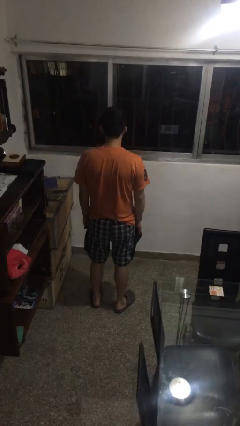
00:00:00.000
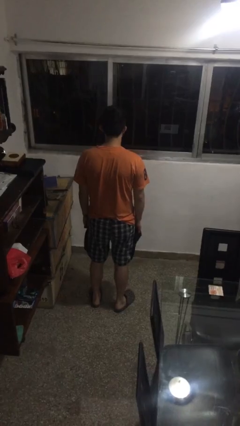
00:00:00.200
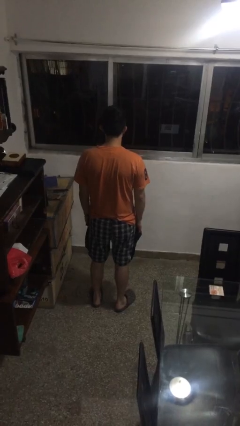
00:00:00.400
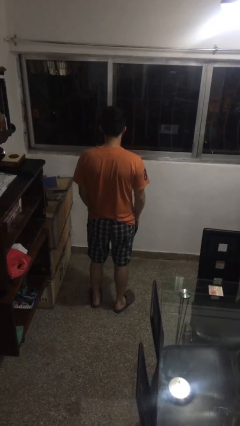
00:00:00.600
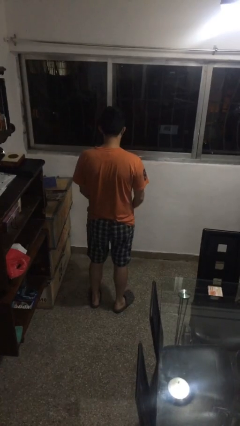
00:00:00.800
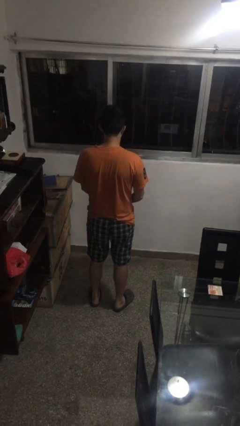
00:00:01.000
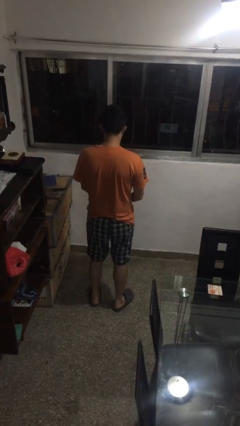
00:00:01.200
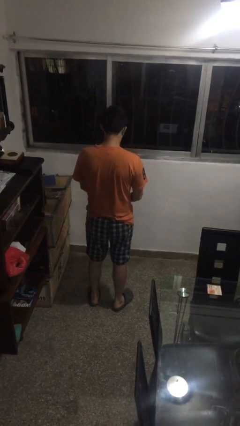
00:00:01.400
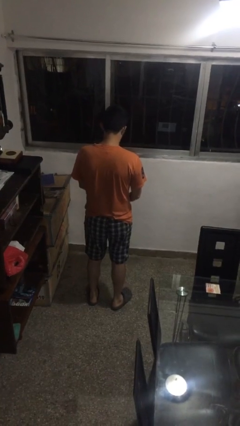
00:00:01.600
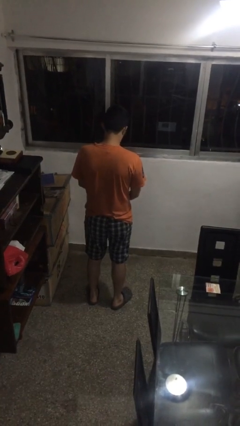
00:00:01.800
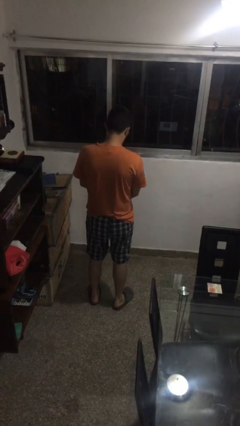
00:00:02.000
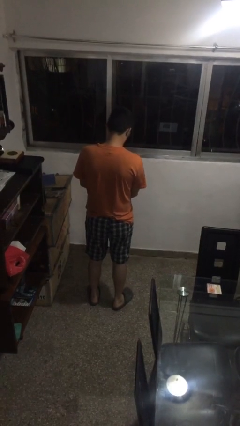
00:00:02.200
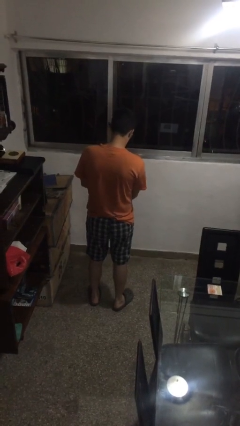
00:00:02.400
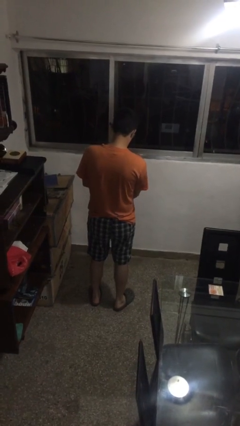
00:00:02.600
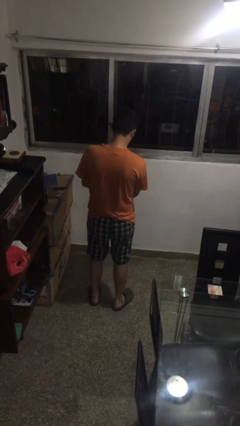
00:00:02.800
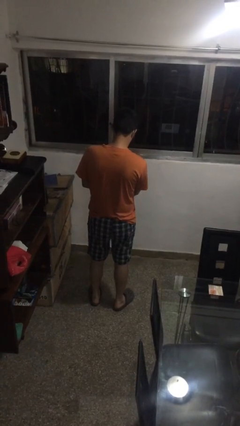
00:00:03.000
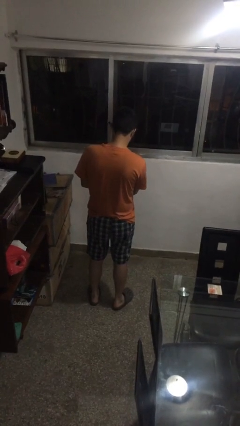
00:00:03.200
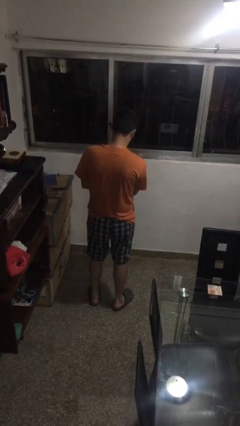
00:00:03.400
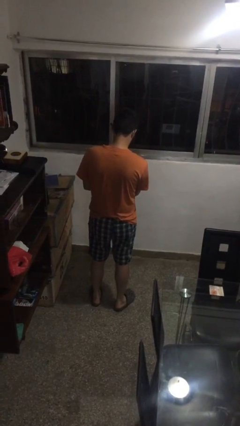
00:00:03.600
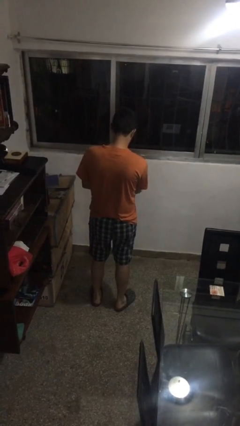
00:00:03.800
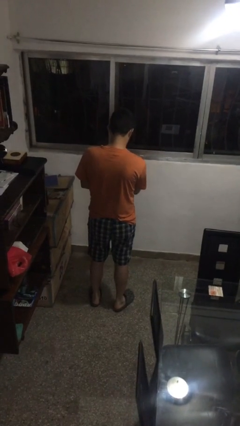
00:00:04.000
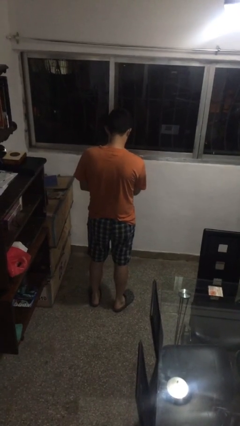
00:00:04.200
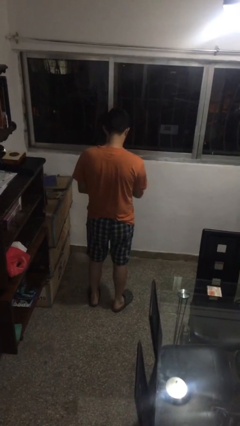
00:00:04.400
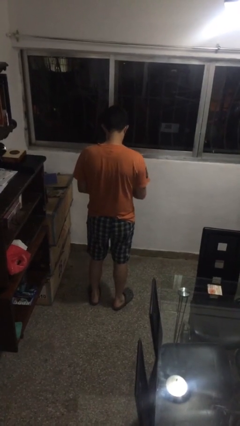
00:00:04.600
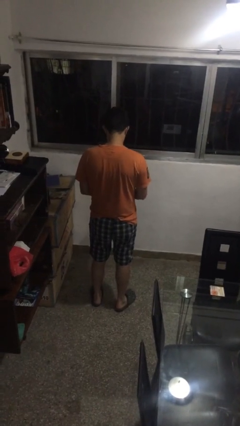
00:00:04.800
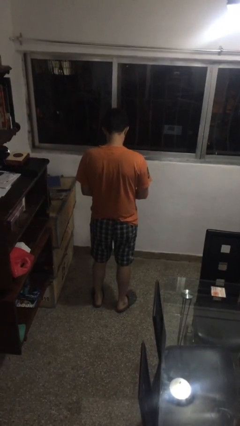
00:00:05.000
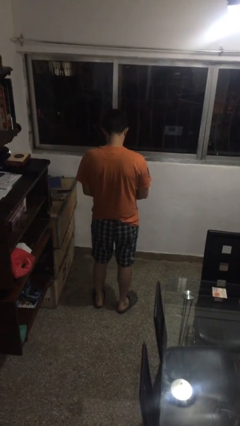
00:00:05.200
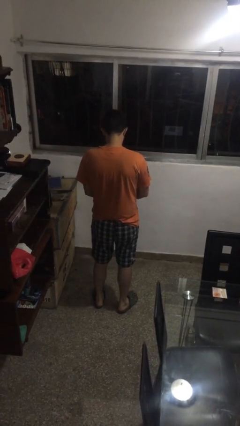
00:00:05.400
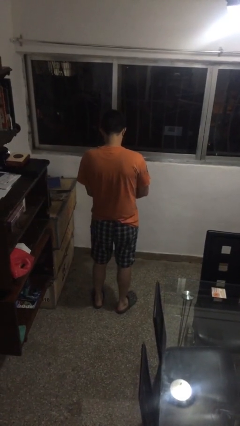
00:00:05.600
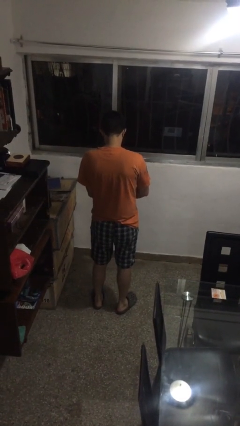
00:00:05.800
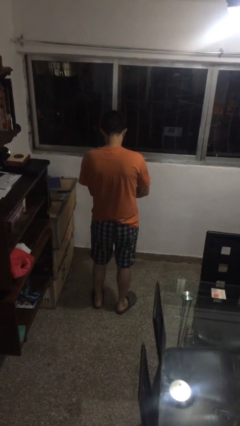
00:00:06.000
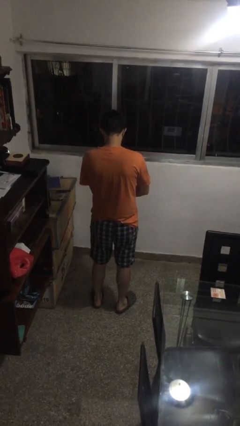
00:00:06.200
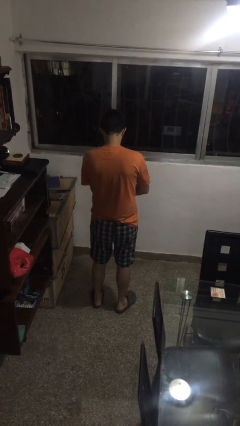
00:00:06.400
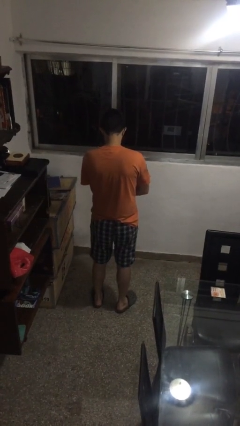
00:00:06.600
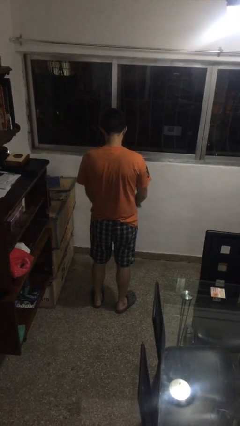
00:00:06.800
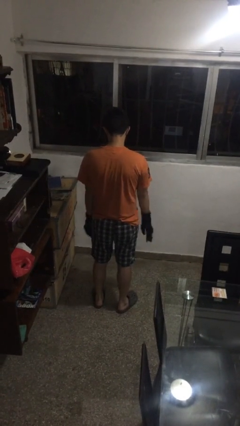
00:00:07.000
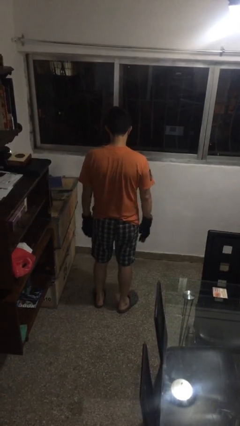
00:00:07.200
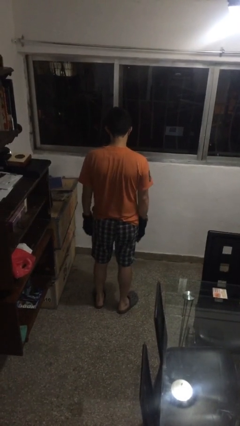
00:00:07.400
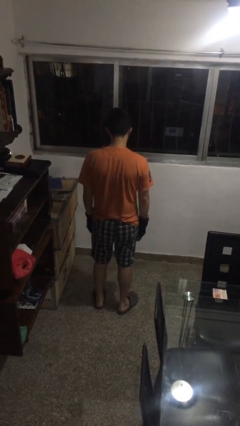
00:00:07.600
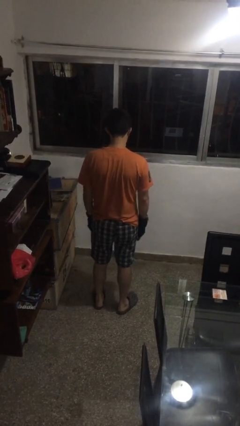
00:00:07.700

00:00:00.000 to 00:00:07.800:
person puts on gloves

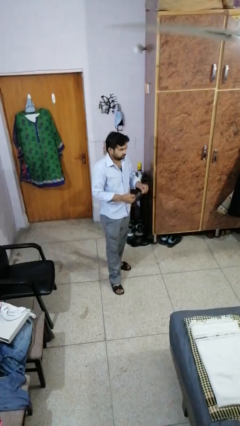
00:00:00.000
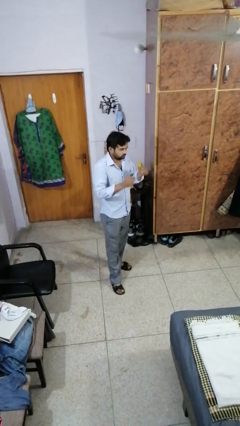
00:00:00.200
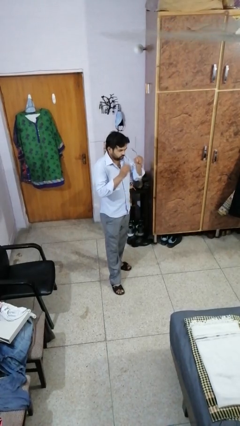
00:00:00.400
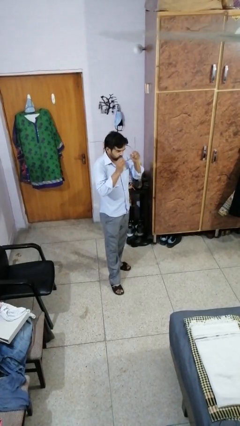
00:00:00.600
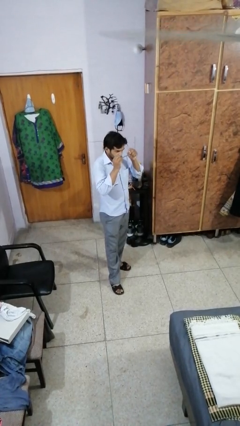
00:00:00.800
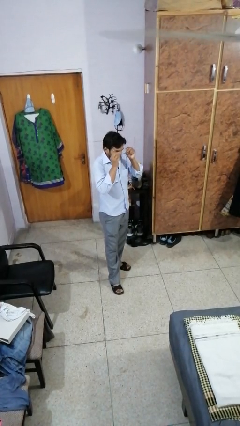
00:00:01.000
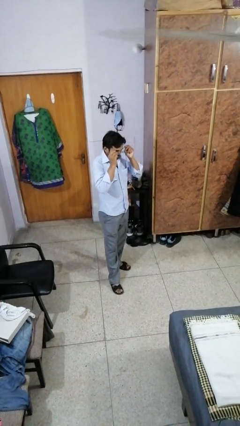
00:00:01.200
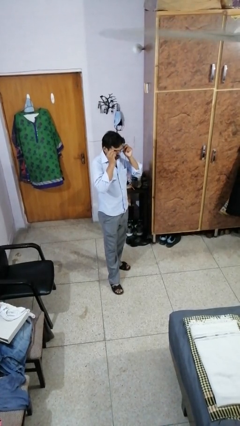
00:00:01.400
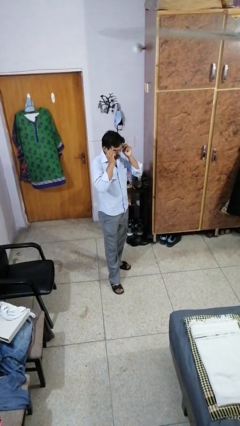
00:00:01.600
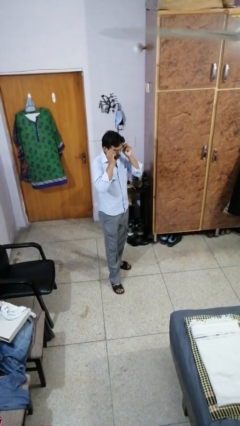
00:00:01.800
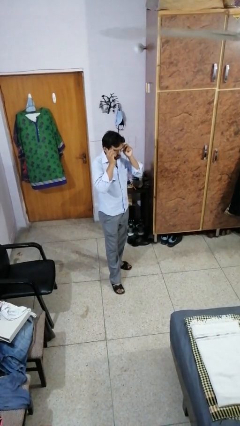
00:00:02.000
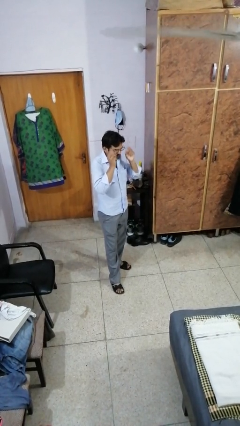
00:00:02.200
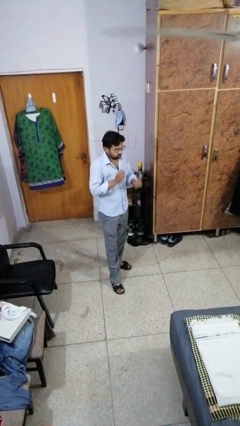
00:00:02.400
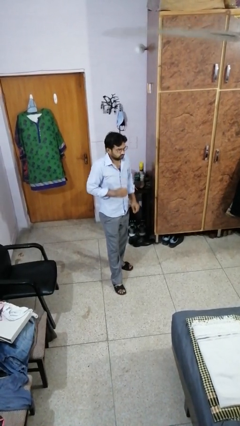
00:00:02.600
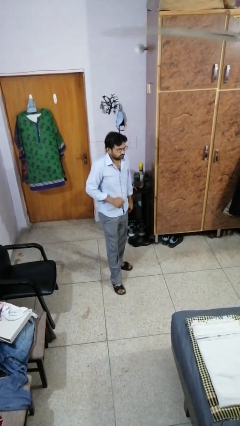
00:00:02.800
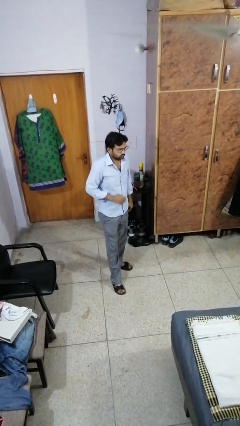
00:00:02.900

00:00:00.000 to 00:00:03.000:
person puts on glasses

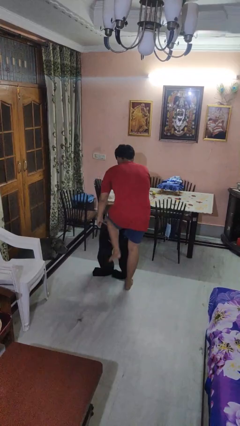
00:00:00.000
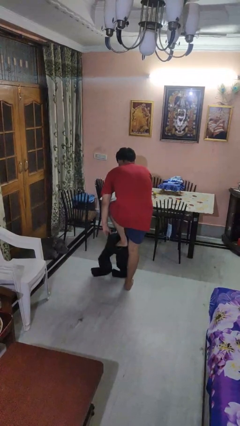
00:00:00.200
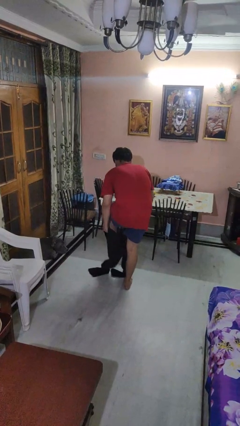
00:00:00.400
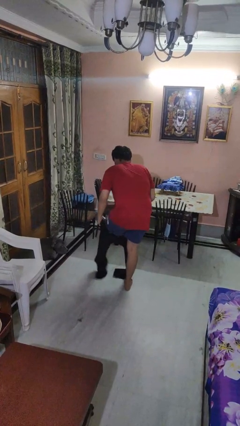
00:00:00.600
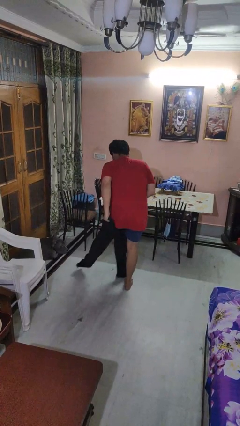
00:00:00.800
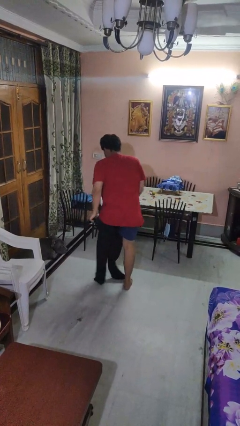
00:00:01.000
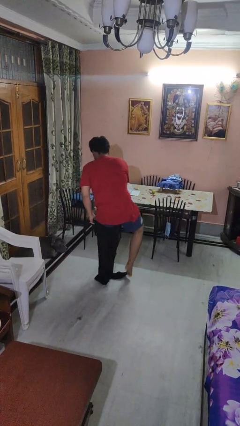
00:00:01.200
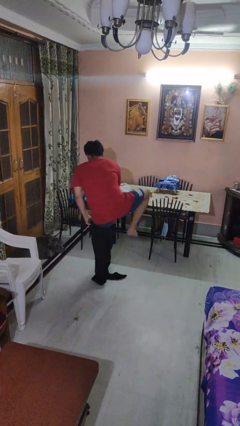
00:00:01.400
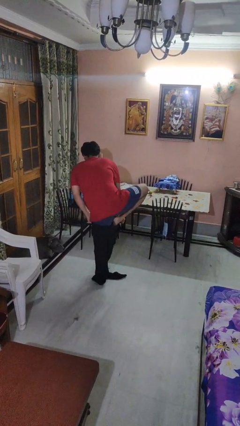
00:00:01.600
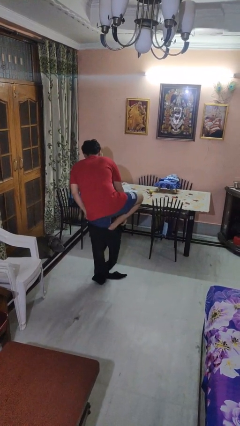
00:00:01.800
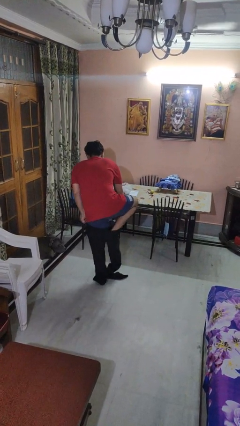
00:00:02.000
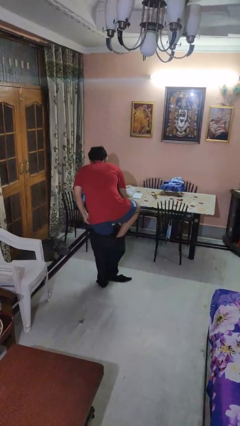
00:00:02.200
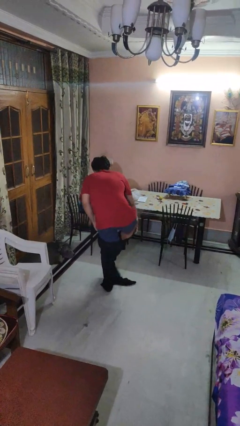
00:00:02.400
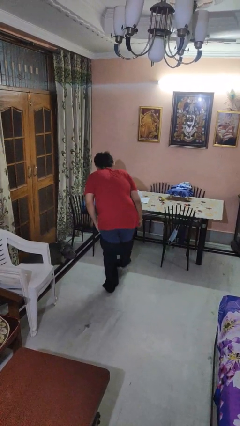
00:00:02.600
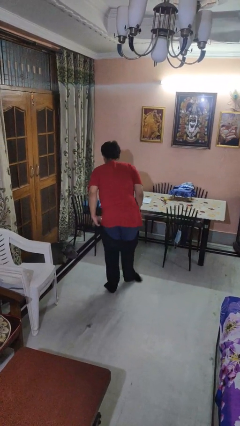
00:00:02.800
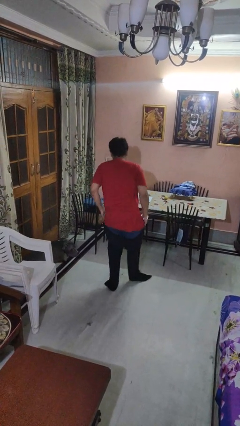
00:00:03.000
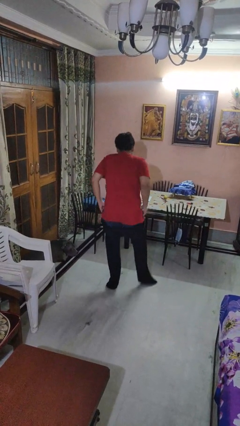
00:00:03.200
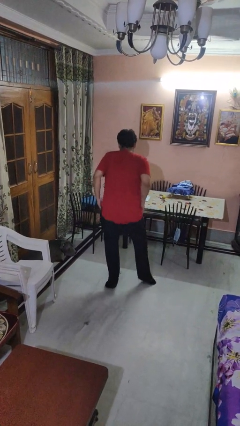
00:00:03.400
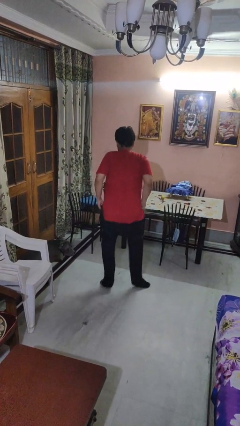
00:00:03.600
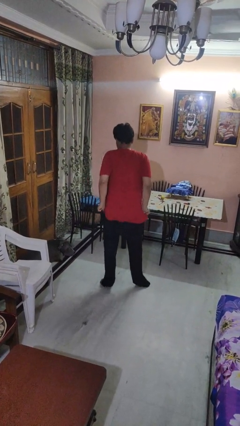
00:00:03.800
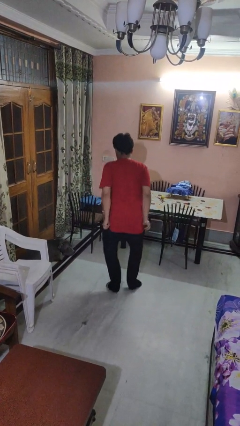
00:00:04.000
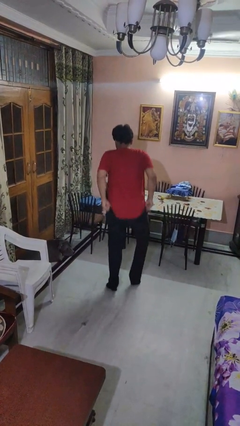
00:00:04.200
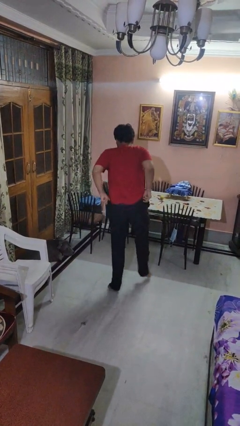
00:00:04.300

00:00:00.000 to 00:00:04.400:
person puts on pants

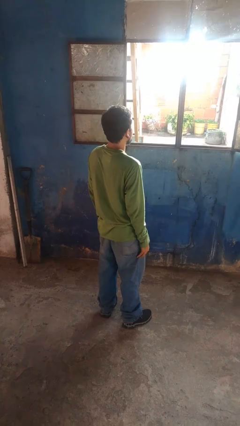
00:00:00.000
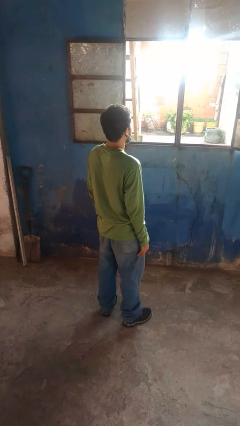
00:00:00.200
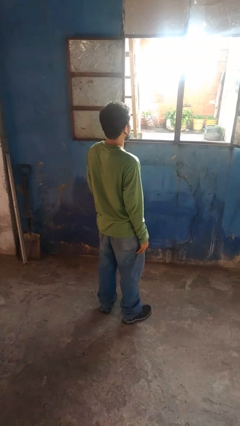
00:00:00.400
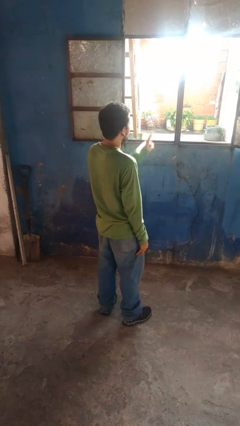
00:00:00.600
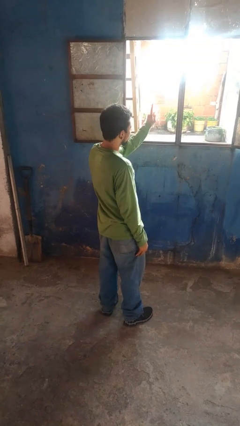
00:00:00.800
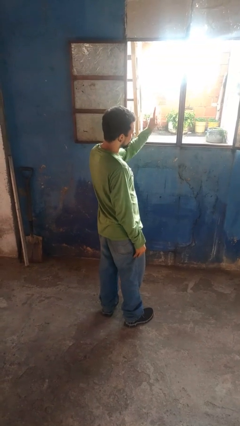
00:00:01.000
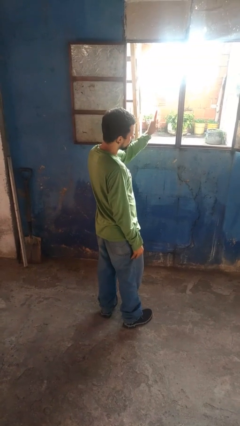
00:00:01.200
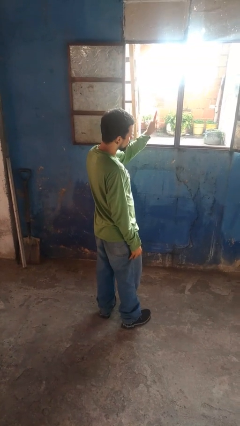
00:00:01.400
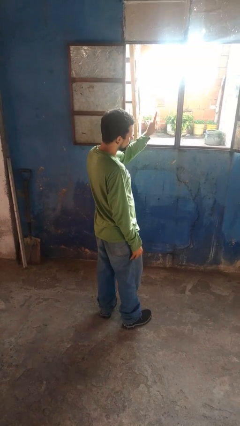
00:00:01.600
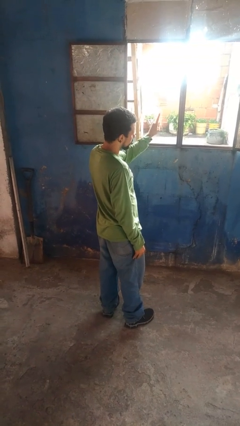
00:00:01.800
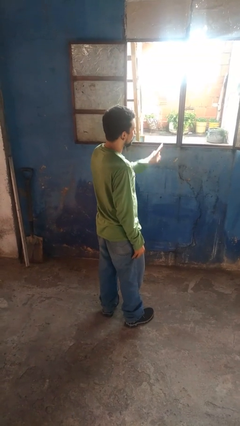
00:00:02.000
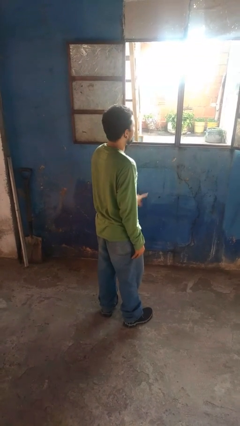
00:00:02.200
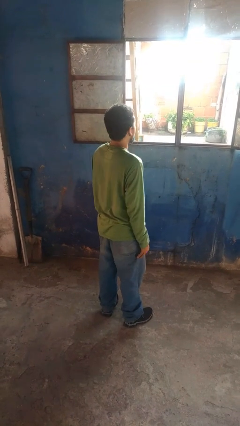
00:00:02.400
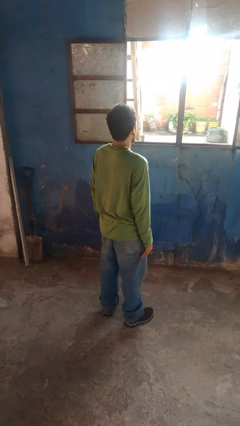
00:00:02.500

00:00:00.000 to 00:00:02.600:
person gestures number one
